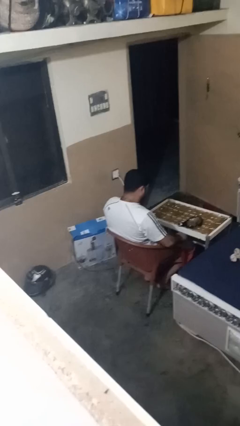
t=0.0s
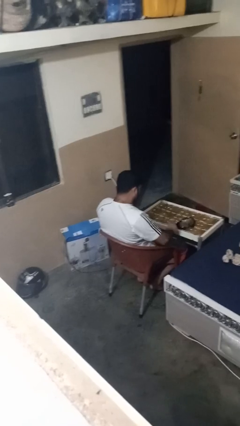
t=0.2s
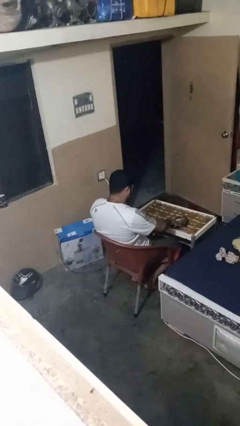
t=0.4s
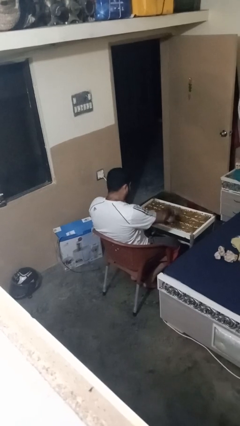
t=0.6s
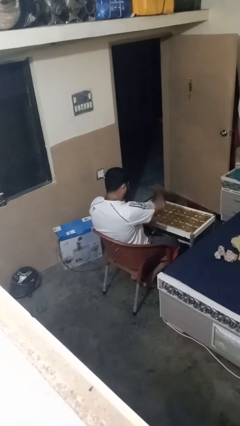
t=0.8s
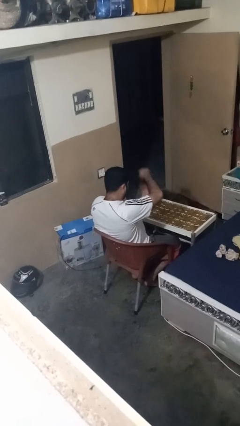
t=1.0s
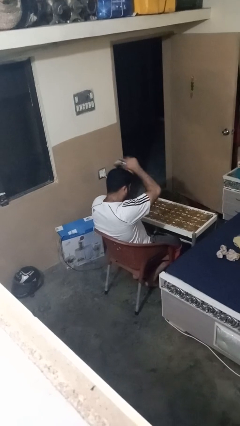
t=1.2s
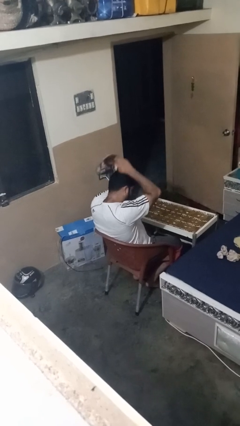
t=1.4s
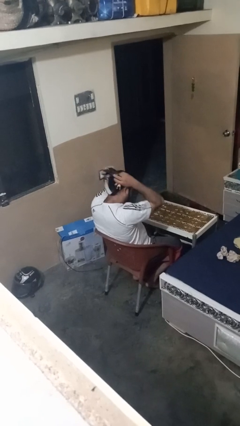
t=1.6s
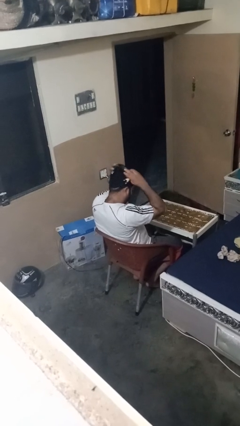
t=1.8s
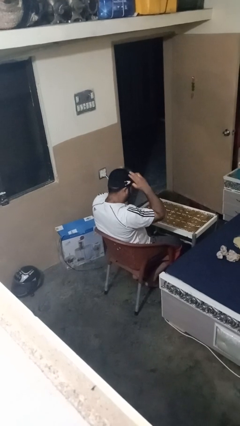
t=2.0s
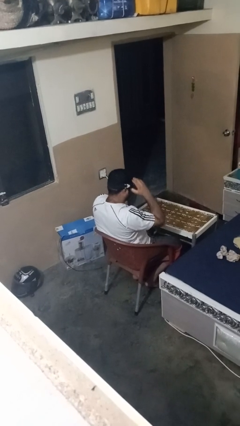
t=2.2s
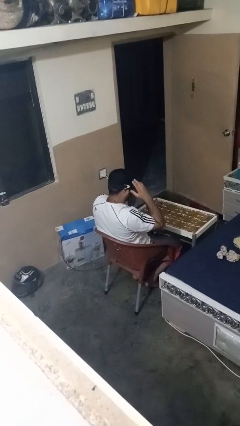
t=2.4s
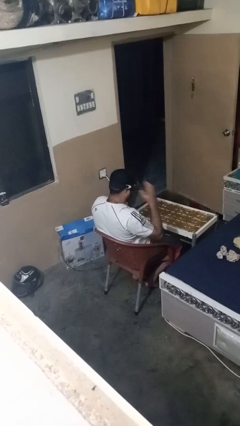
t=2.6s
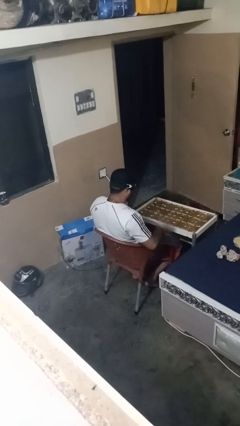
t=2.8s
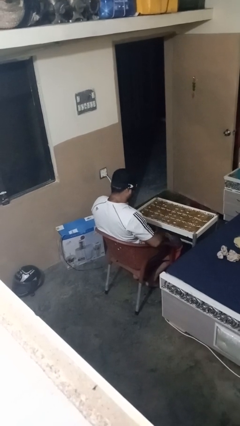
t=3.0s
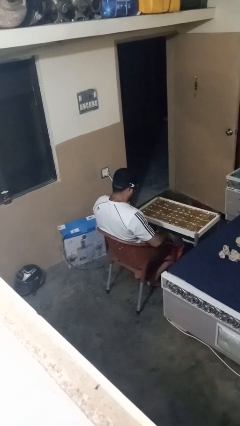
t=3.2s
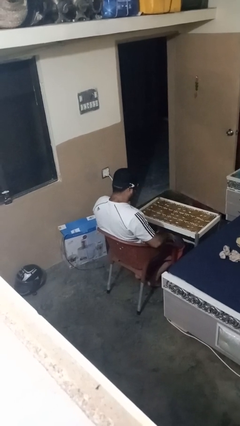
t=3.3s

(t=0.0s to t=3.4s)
person puts on sunglasses

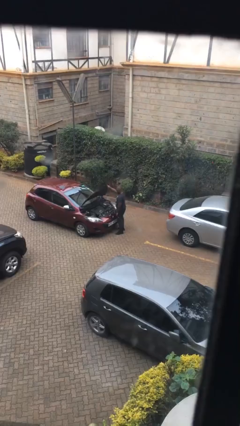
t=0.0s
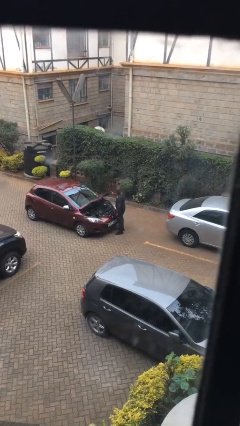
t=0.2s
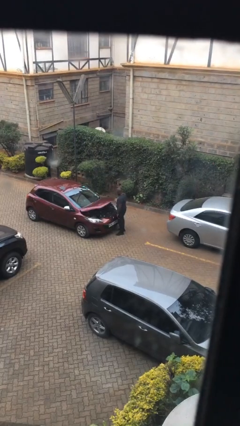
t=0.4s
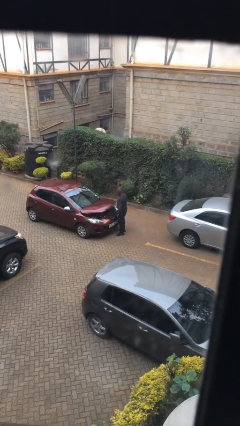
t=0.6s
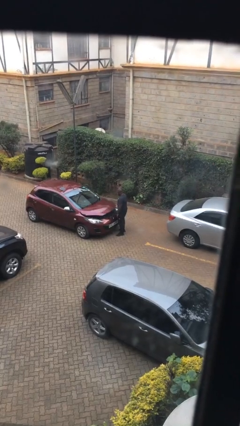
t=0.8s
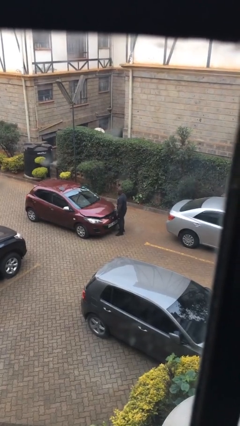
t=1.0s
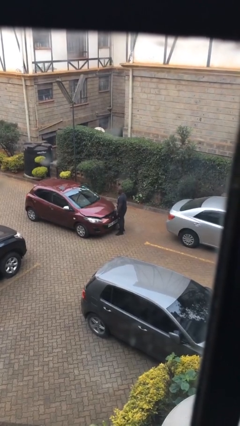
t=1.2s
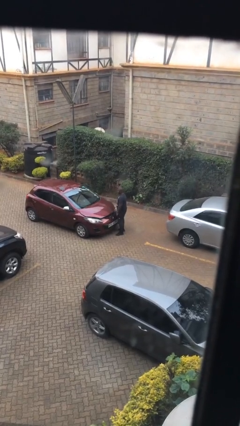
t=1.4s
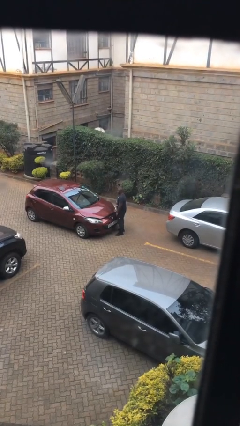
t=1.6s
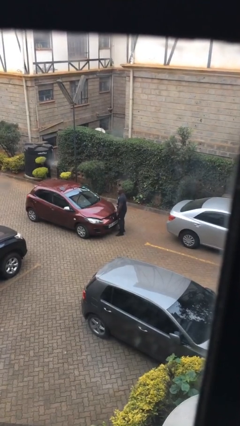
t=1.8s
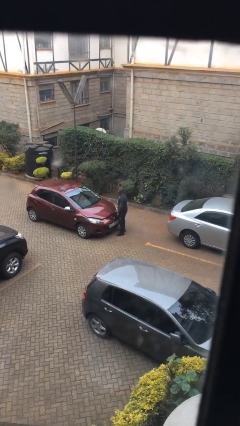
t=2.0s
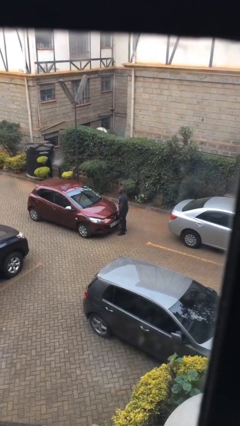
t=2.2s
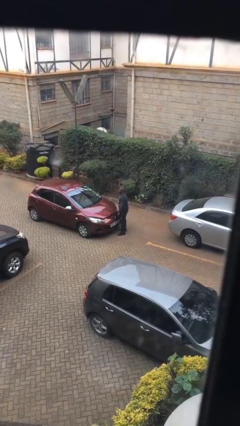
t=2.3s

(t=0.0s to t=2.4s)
person closes car hood

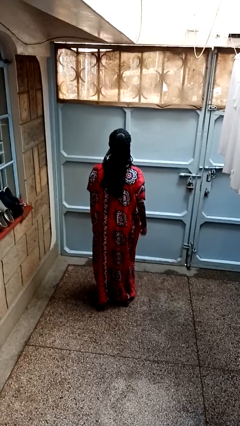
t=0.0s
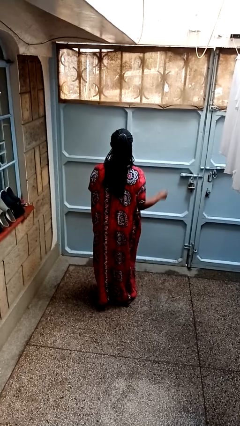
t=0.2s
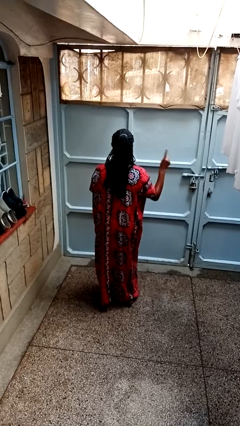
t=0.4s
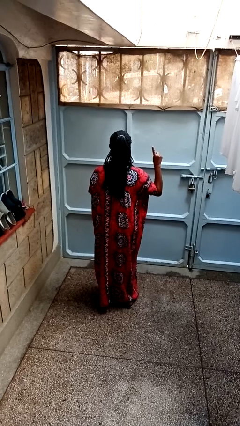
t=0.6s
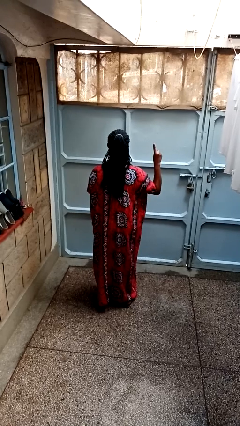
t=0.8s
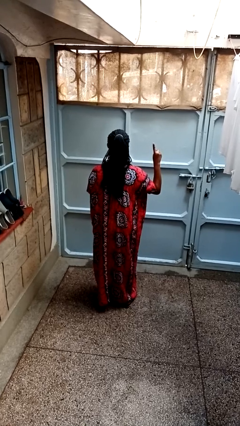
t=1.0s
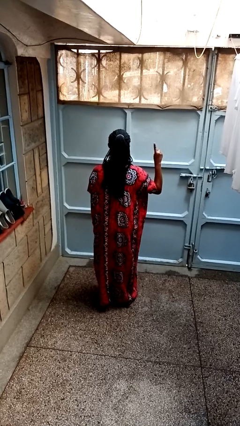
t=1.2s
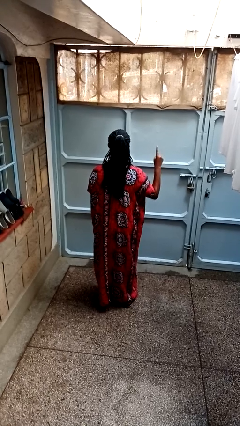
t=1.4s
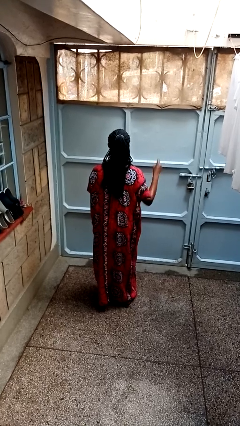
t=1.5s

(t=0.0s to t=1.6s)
person gestures number one

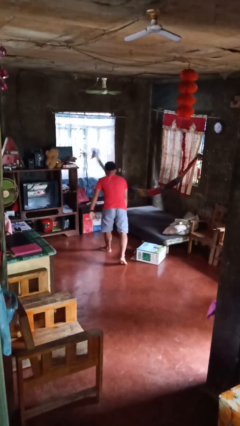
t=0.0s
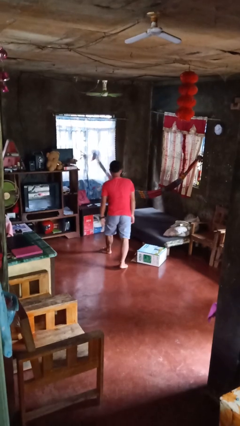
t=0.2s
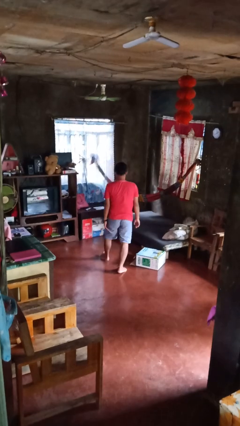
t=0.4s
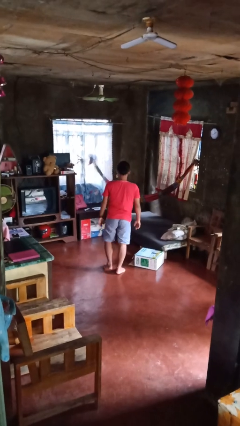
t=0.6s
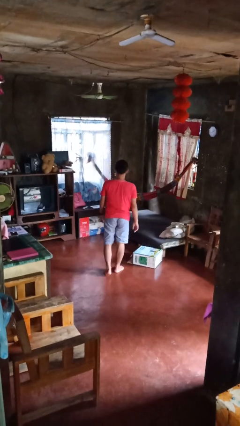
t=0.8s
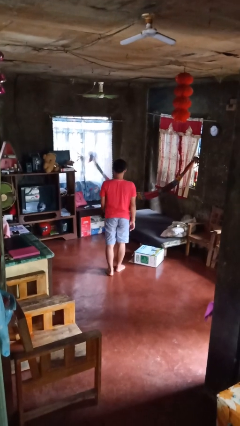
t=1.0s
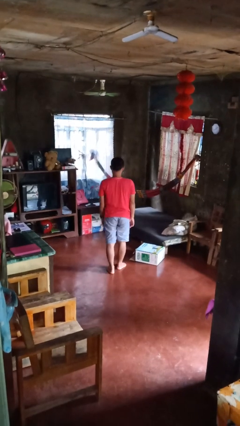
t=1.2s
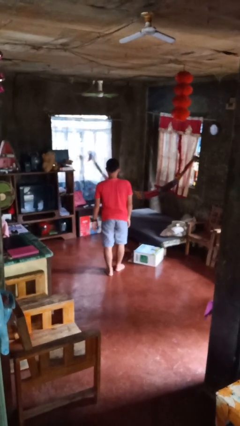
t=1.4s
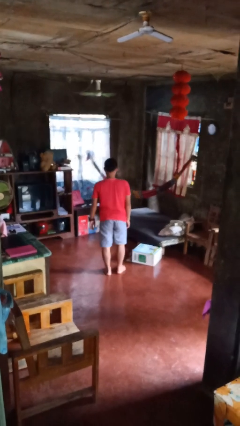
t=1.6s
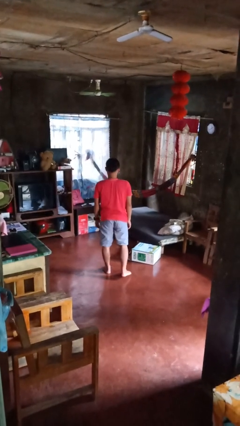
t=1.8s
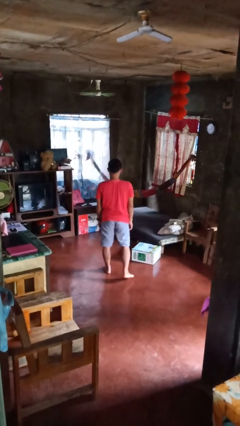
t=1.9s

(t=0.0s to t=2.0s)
person stands up from floor

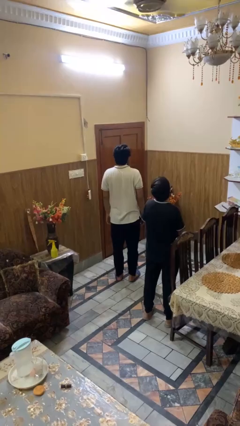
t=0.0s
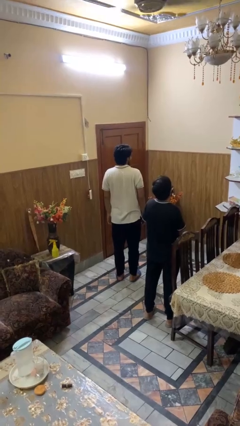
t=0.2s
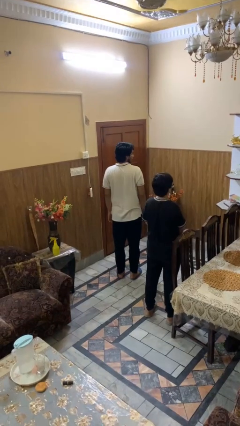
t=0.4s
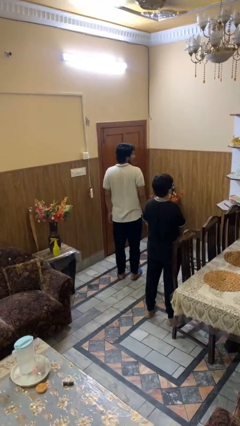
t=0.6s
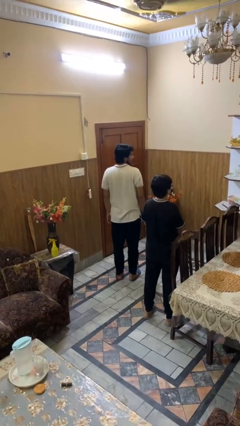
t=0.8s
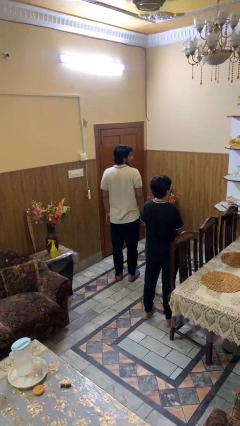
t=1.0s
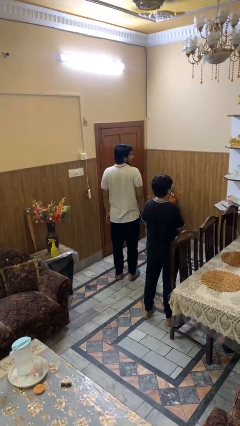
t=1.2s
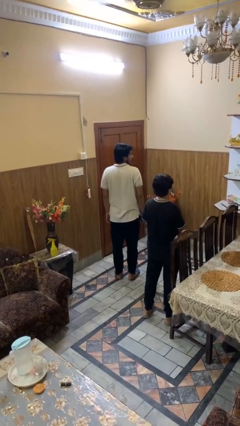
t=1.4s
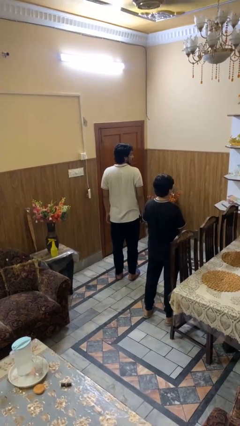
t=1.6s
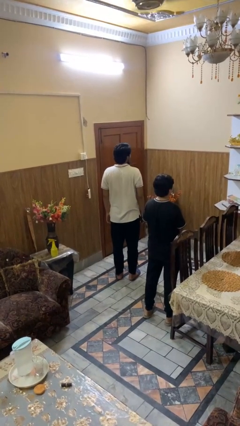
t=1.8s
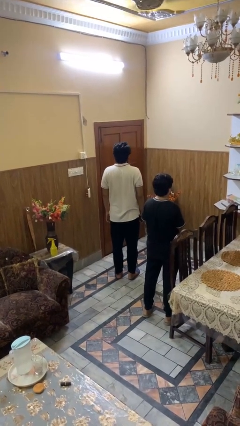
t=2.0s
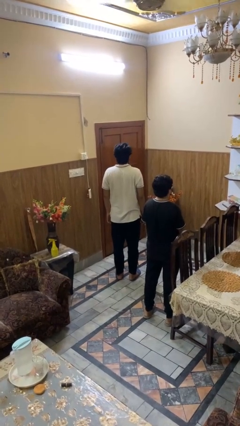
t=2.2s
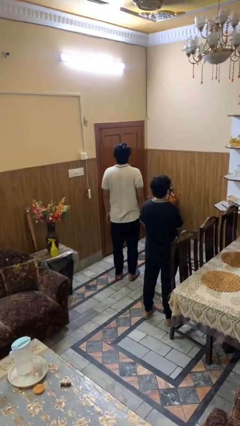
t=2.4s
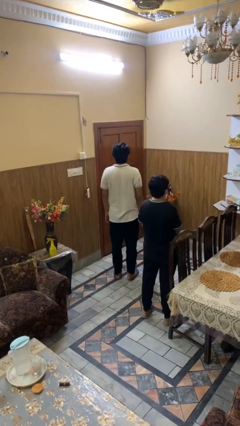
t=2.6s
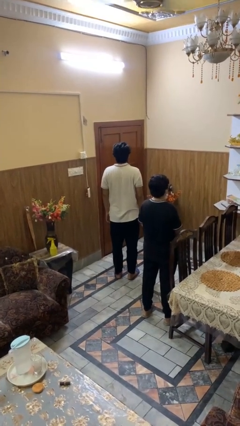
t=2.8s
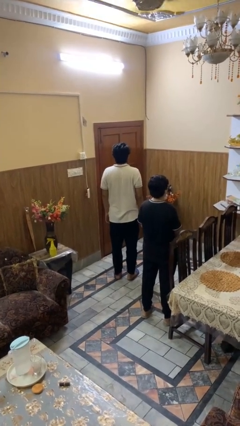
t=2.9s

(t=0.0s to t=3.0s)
person looks over shoulder

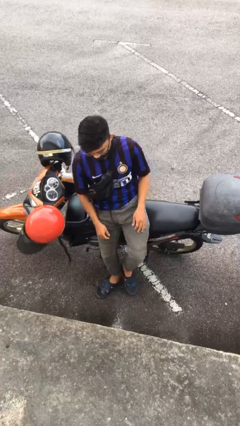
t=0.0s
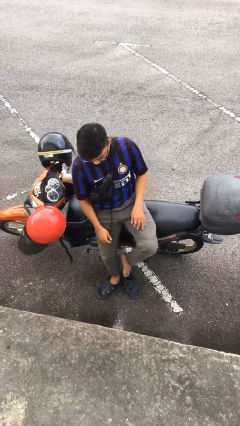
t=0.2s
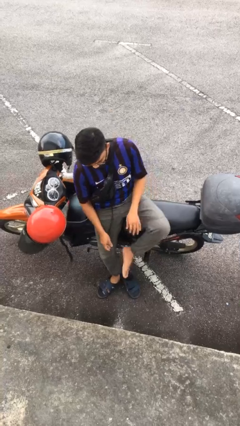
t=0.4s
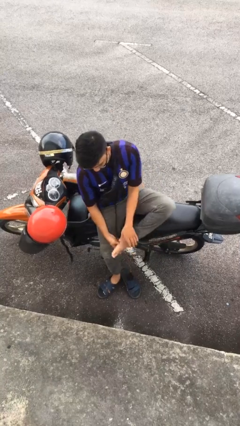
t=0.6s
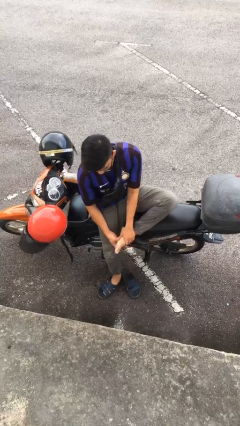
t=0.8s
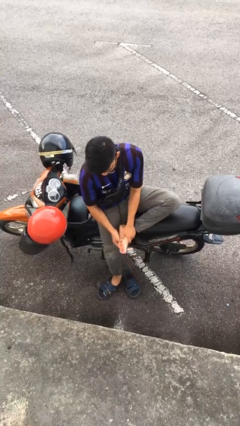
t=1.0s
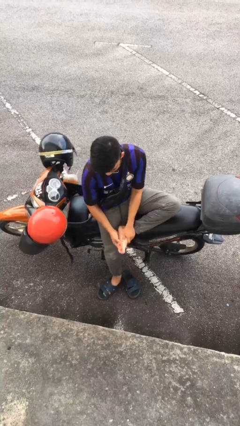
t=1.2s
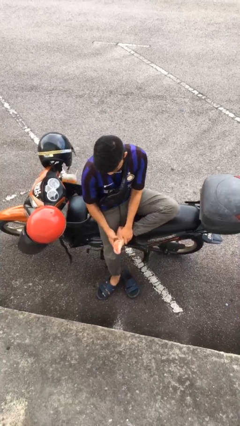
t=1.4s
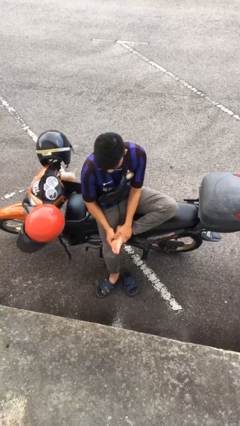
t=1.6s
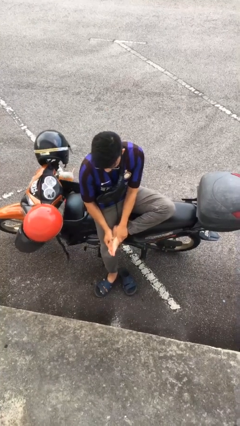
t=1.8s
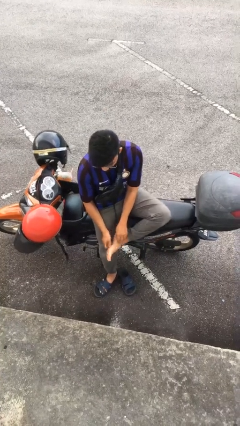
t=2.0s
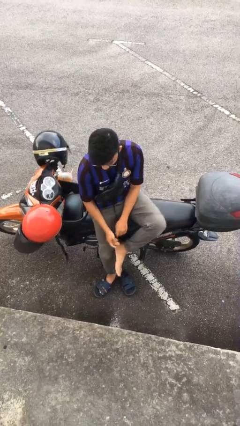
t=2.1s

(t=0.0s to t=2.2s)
person rubs foot

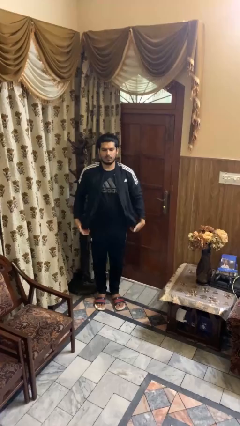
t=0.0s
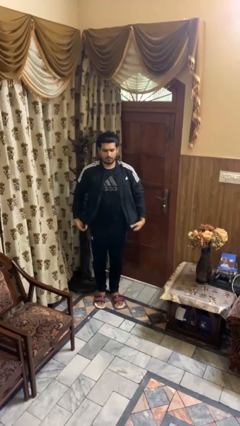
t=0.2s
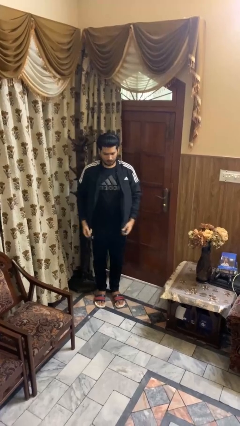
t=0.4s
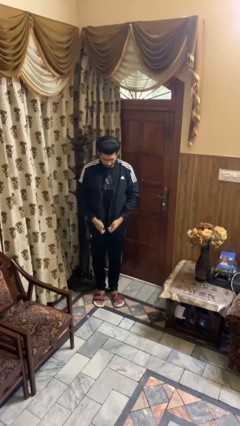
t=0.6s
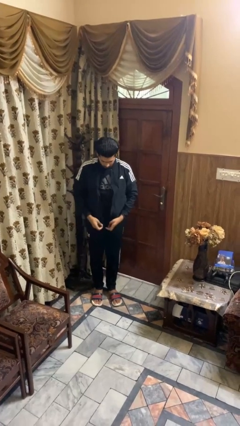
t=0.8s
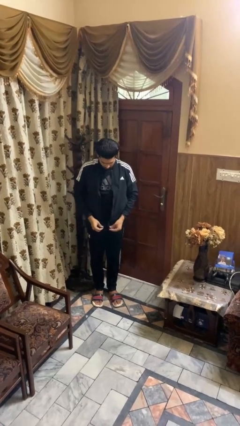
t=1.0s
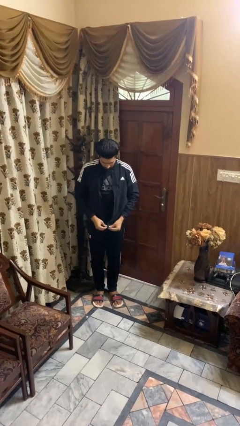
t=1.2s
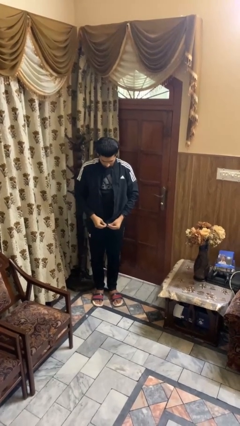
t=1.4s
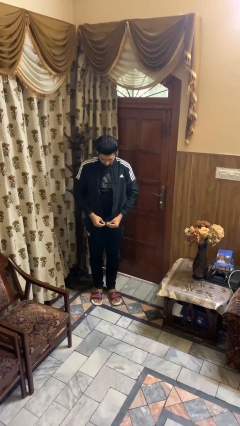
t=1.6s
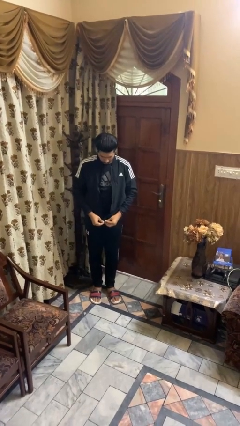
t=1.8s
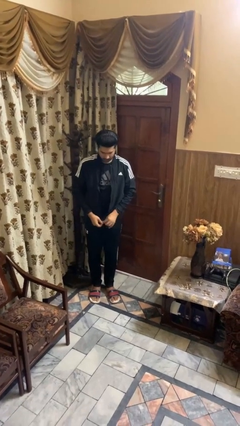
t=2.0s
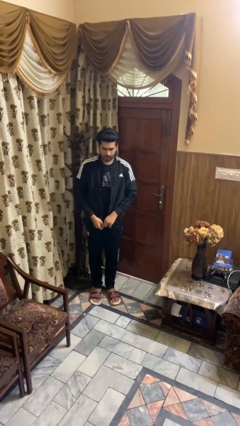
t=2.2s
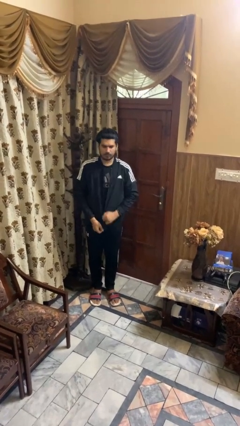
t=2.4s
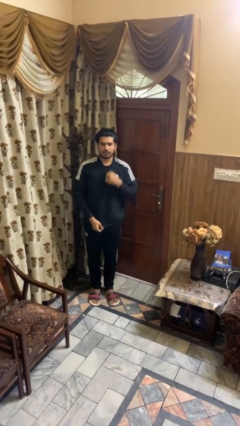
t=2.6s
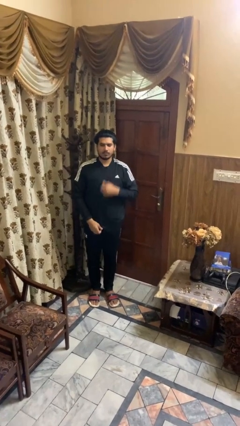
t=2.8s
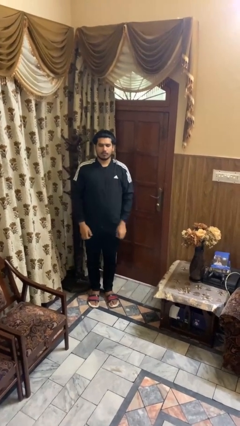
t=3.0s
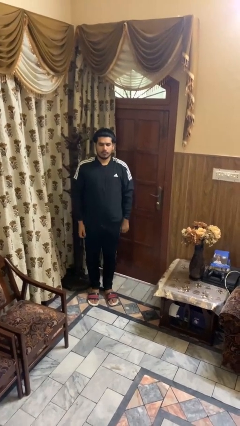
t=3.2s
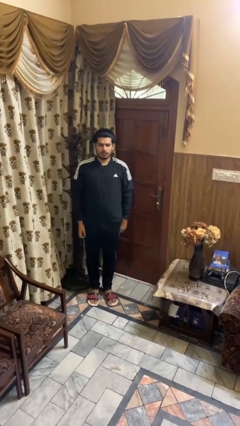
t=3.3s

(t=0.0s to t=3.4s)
person zips up jacket
